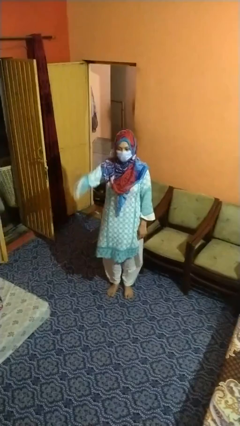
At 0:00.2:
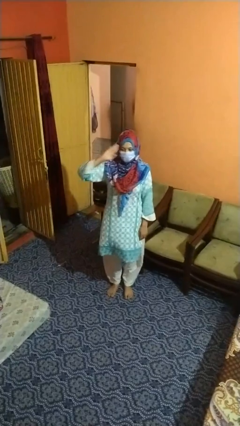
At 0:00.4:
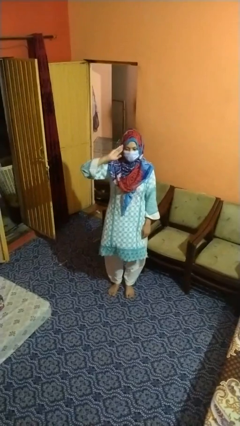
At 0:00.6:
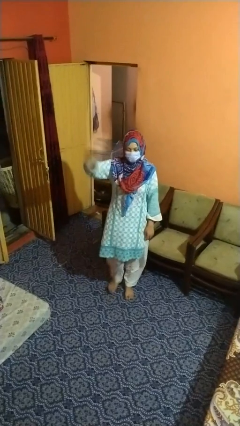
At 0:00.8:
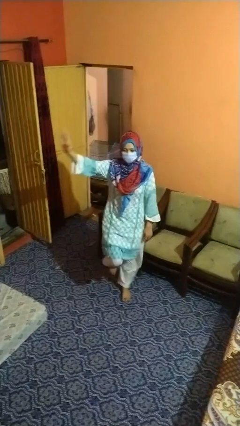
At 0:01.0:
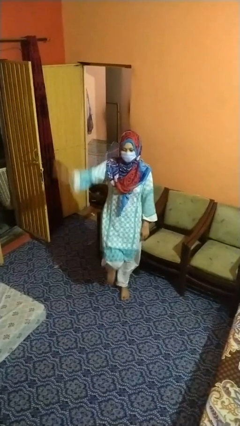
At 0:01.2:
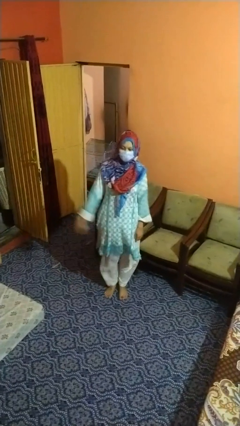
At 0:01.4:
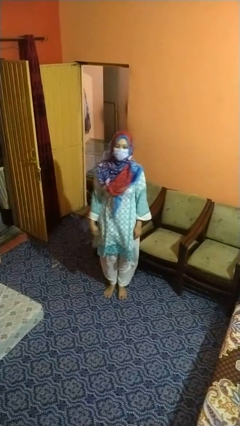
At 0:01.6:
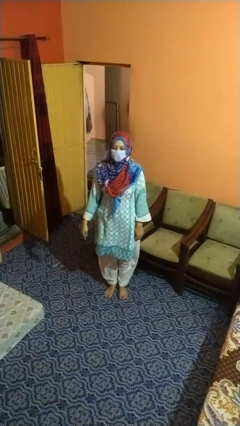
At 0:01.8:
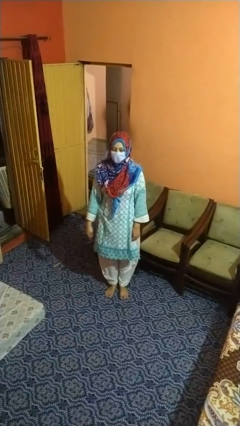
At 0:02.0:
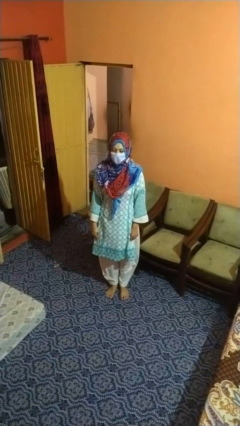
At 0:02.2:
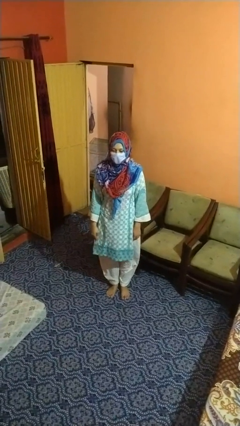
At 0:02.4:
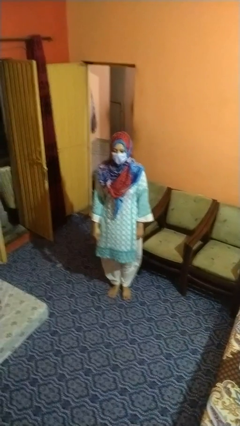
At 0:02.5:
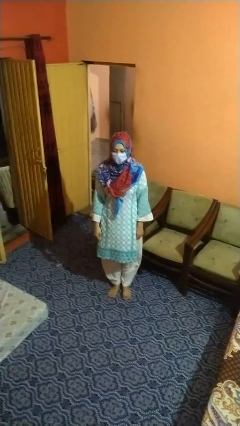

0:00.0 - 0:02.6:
person salutes

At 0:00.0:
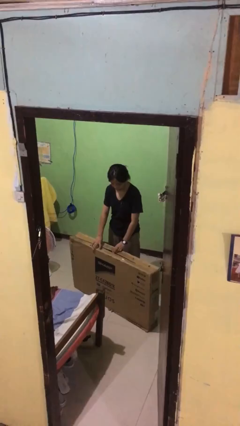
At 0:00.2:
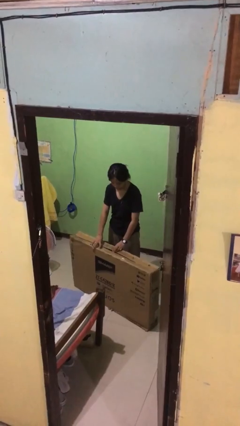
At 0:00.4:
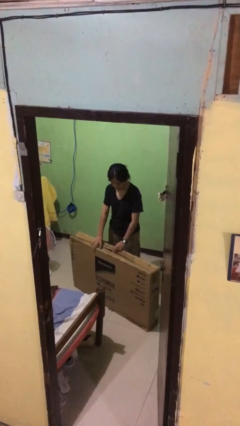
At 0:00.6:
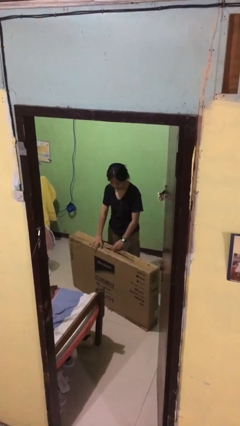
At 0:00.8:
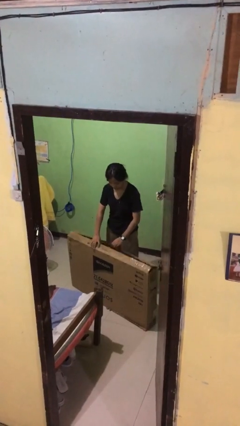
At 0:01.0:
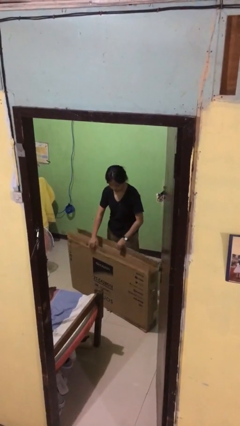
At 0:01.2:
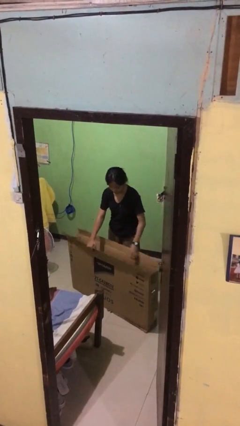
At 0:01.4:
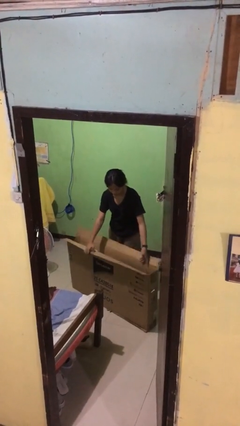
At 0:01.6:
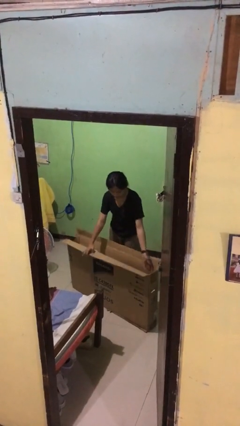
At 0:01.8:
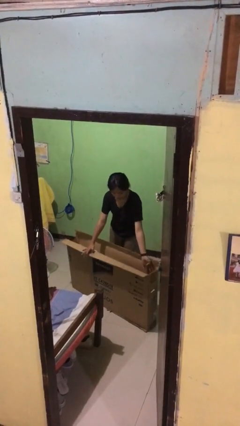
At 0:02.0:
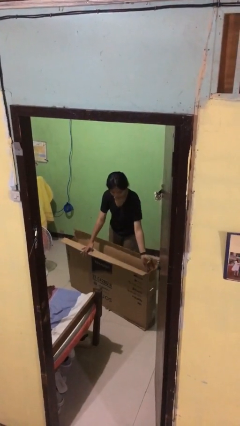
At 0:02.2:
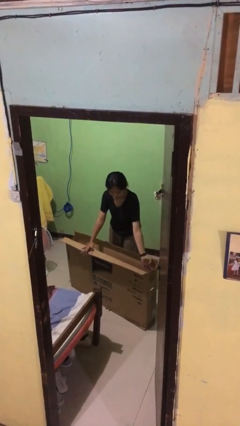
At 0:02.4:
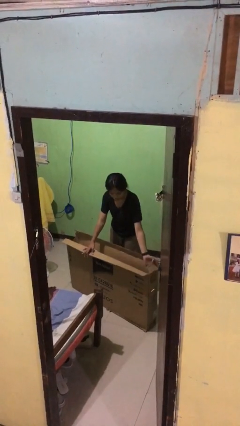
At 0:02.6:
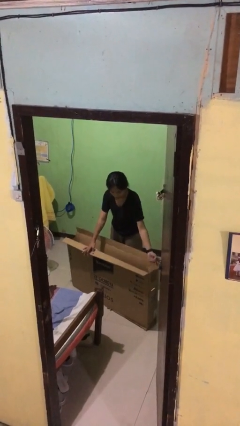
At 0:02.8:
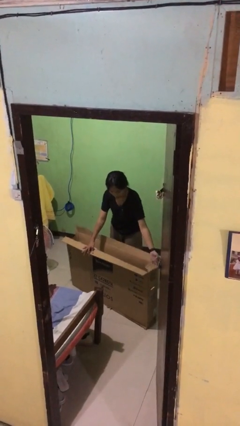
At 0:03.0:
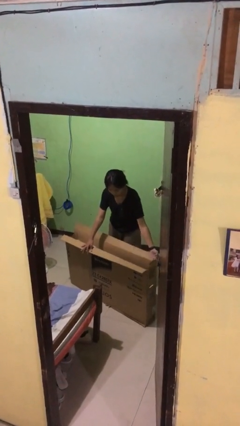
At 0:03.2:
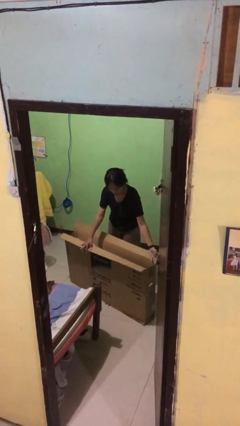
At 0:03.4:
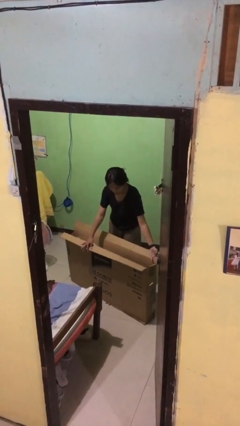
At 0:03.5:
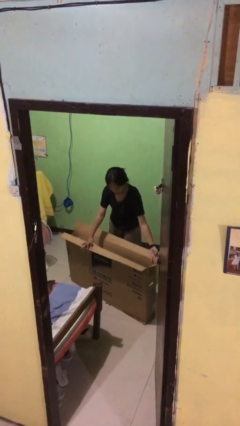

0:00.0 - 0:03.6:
person opens box

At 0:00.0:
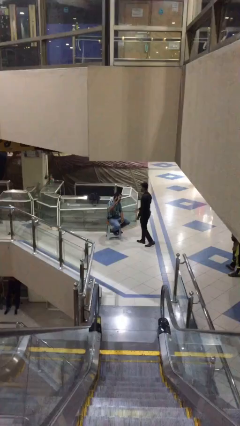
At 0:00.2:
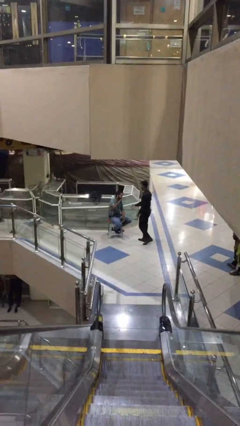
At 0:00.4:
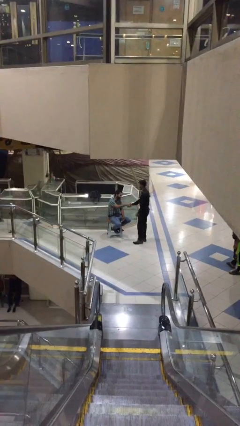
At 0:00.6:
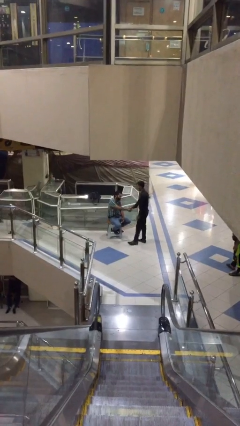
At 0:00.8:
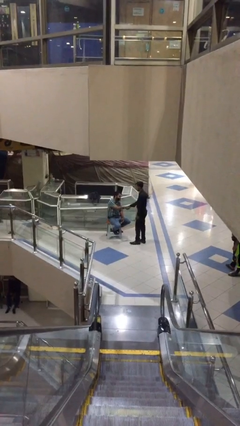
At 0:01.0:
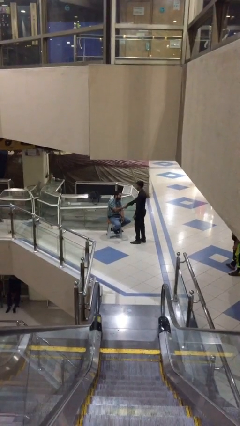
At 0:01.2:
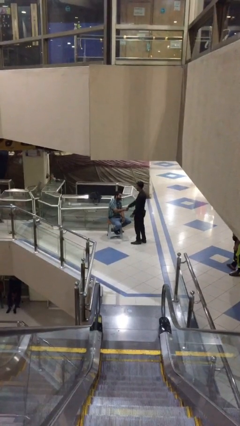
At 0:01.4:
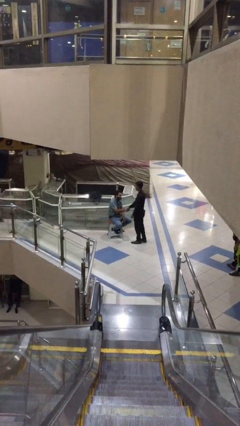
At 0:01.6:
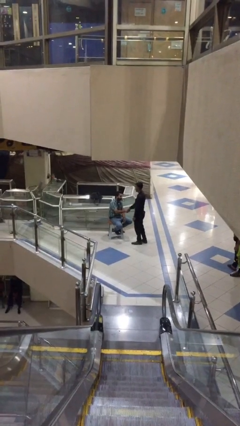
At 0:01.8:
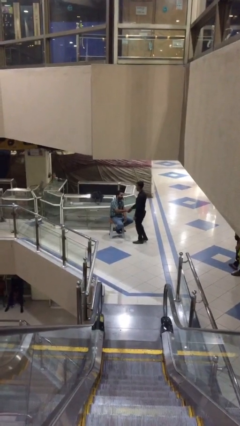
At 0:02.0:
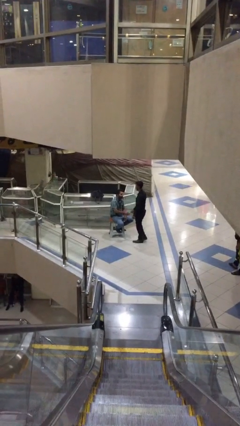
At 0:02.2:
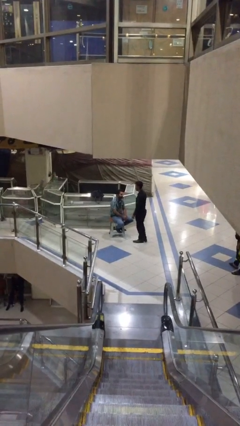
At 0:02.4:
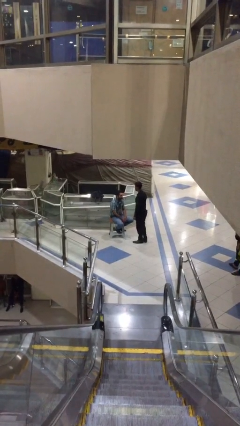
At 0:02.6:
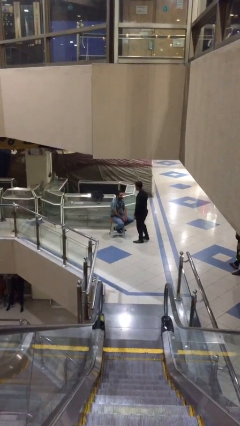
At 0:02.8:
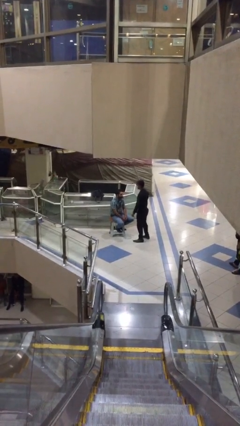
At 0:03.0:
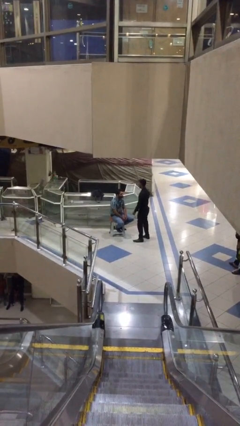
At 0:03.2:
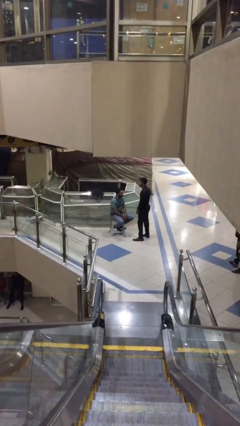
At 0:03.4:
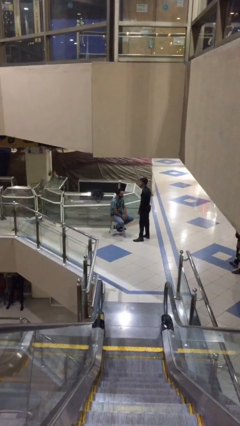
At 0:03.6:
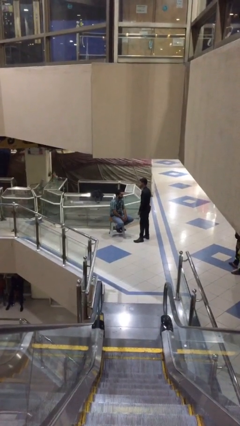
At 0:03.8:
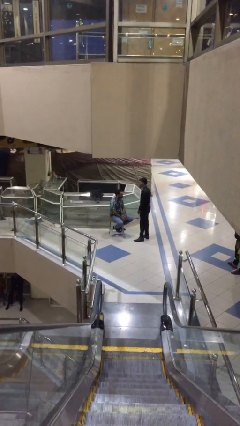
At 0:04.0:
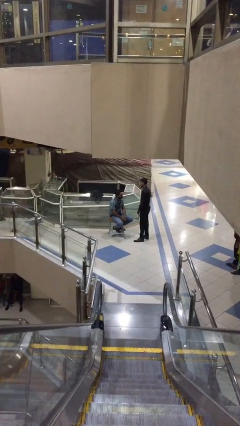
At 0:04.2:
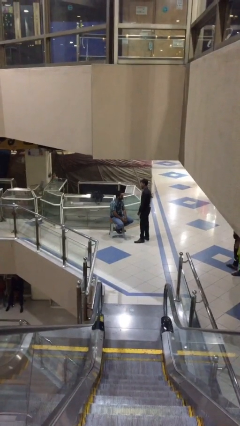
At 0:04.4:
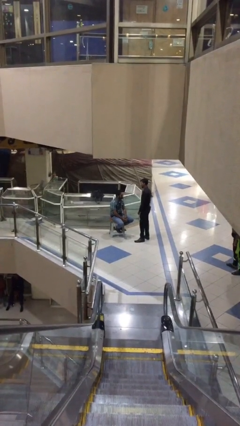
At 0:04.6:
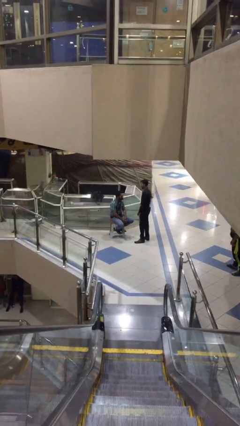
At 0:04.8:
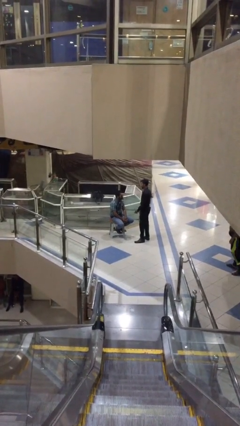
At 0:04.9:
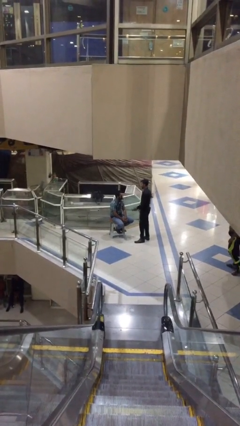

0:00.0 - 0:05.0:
person shakes hand

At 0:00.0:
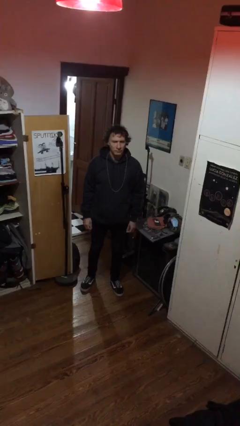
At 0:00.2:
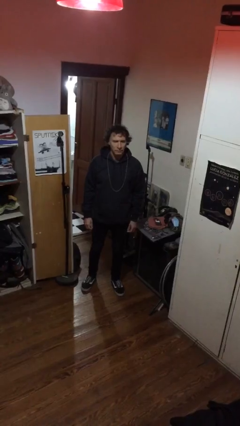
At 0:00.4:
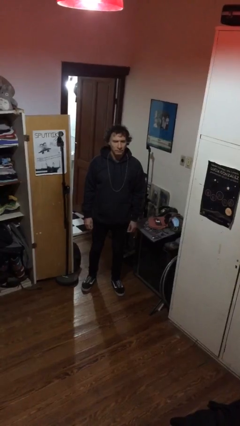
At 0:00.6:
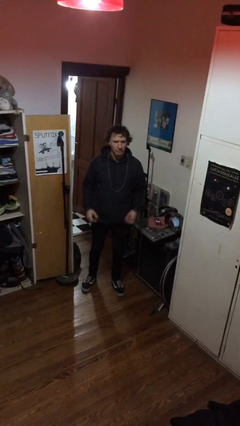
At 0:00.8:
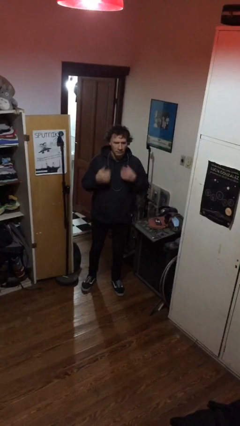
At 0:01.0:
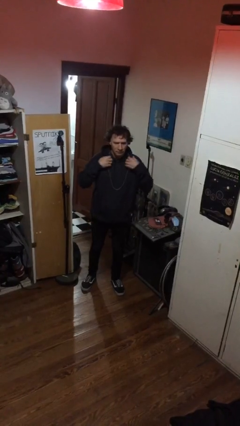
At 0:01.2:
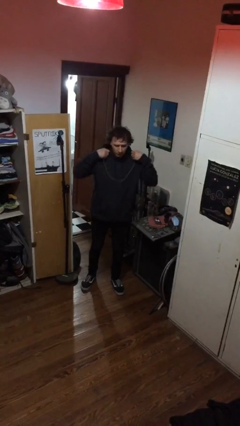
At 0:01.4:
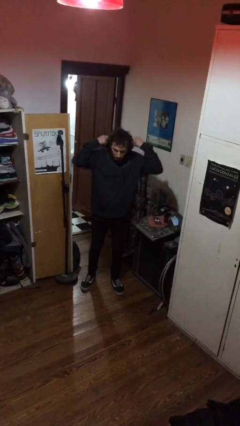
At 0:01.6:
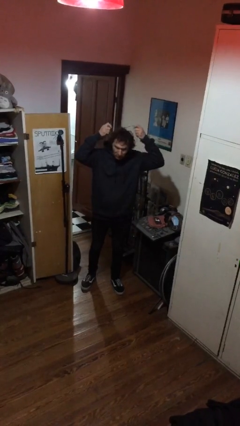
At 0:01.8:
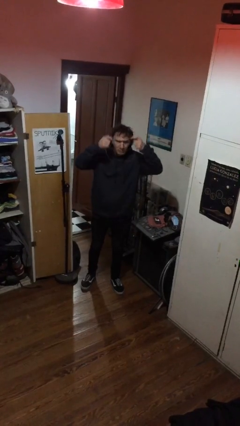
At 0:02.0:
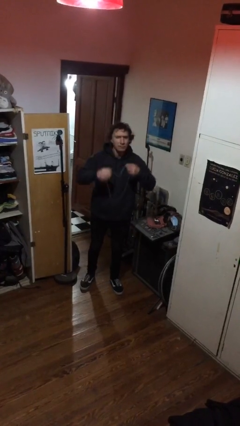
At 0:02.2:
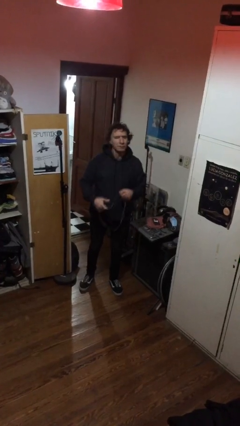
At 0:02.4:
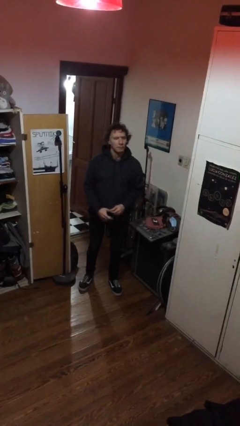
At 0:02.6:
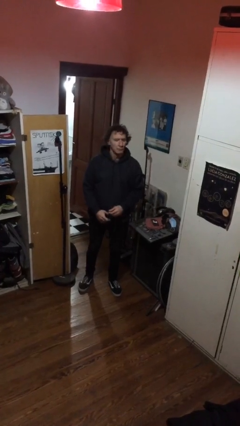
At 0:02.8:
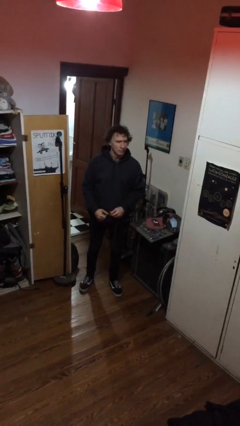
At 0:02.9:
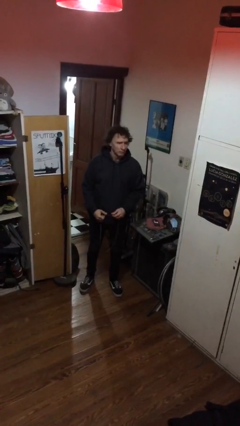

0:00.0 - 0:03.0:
person takes off necklace

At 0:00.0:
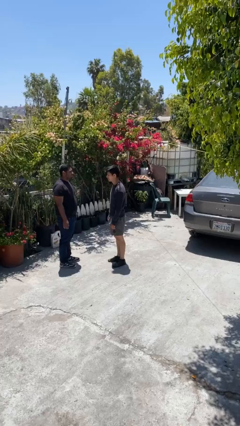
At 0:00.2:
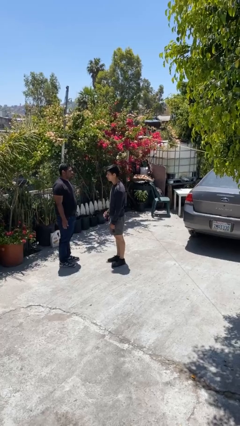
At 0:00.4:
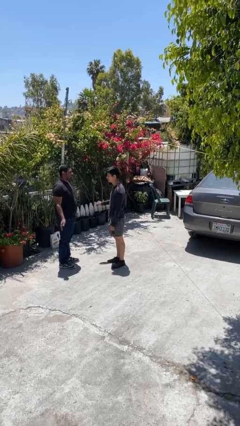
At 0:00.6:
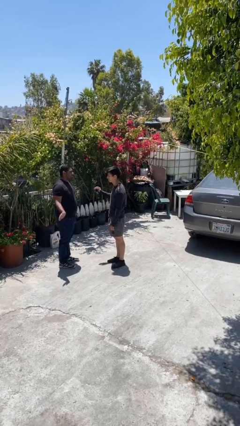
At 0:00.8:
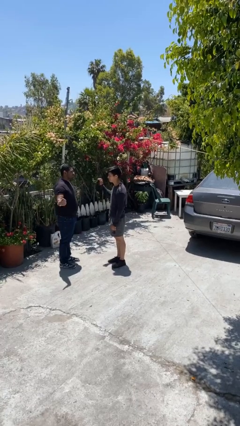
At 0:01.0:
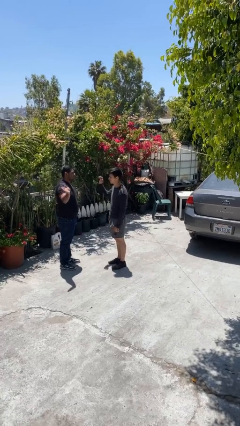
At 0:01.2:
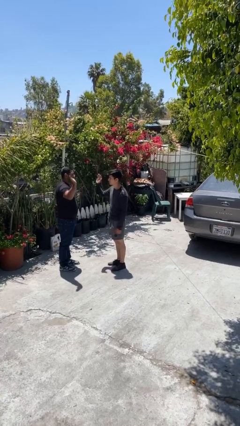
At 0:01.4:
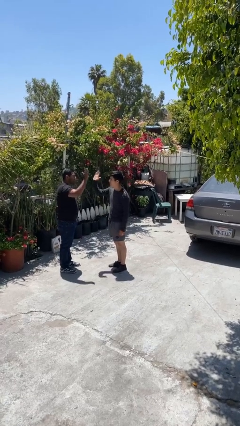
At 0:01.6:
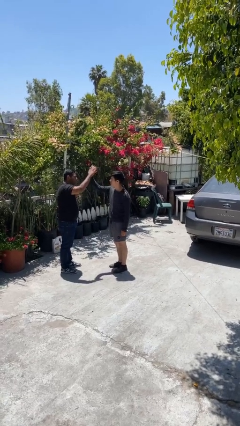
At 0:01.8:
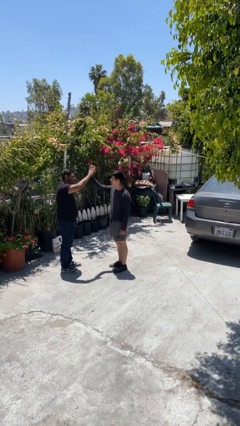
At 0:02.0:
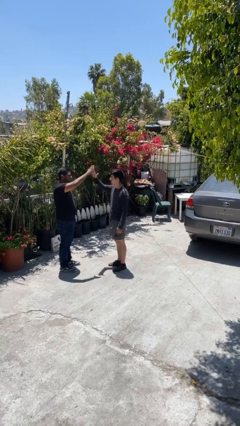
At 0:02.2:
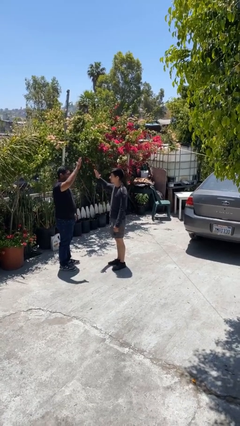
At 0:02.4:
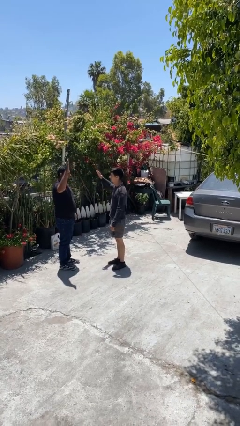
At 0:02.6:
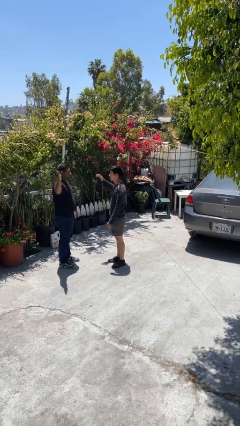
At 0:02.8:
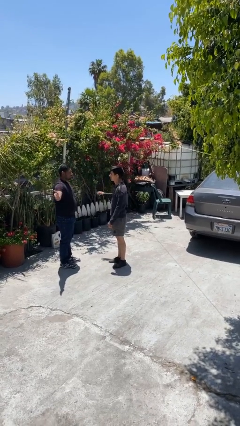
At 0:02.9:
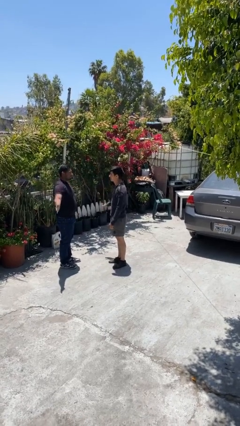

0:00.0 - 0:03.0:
person highfives hand

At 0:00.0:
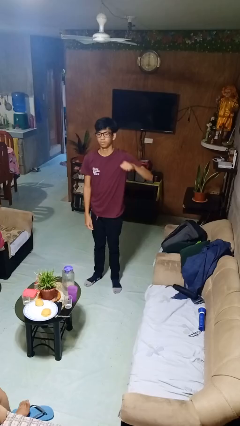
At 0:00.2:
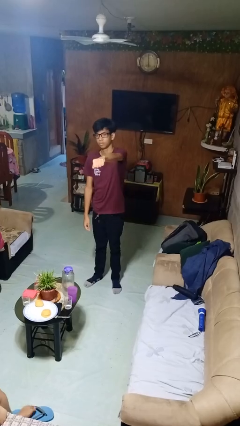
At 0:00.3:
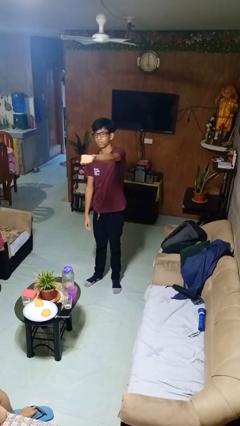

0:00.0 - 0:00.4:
person punches
